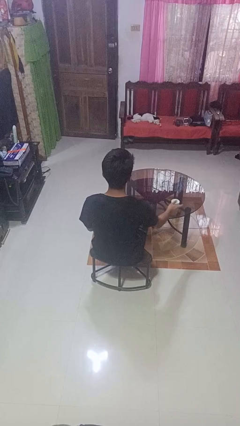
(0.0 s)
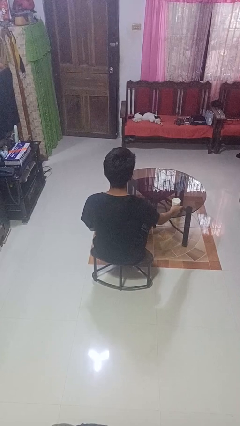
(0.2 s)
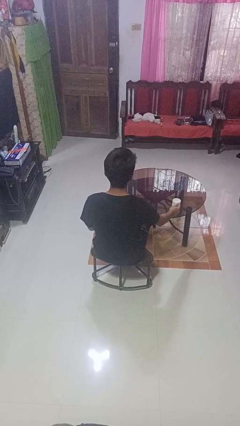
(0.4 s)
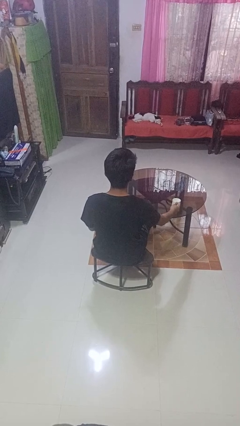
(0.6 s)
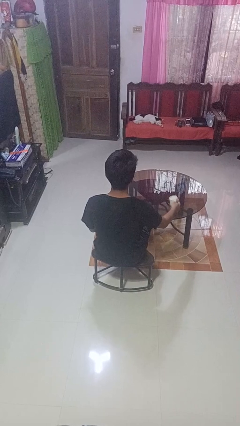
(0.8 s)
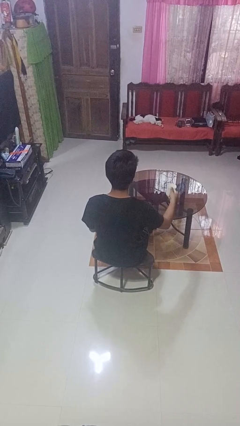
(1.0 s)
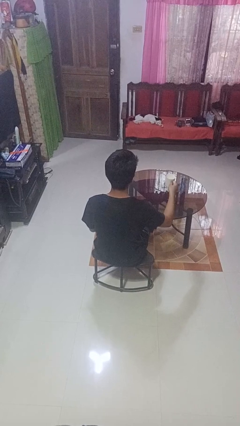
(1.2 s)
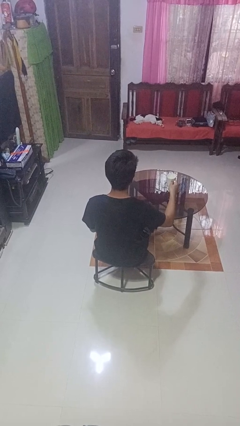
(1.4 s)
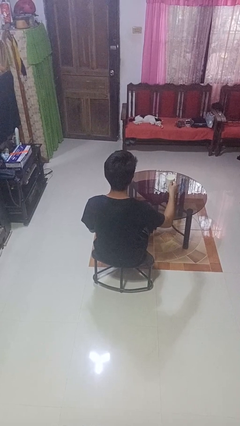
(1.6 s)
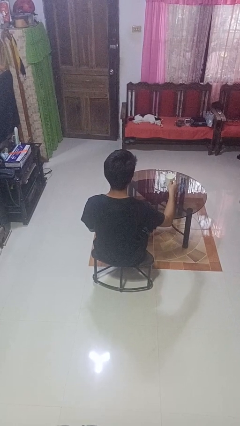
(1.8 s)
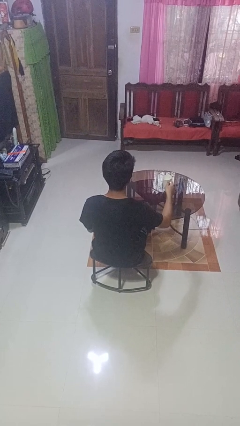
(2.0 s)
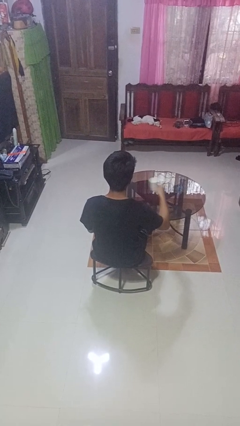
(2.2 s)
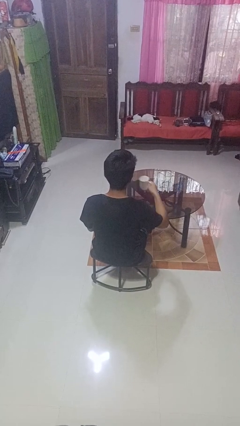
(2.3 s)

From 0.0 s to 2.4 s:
person picks up object from table

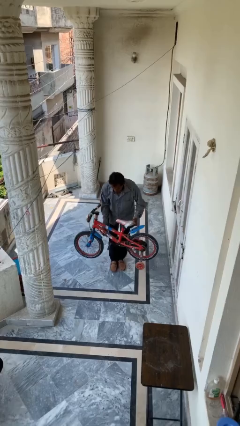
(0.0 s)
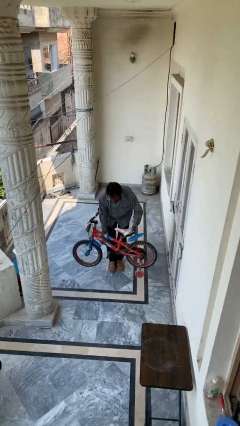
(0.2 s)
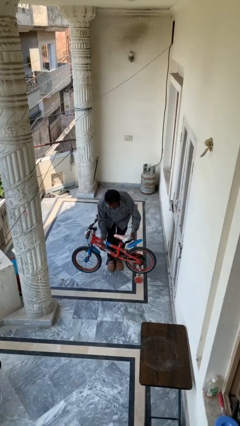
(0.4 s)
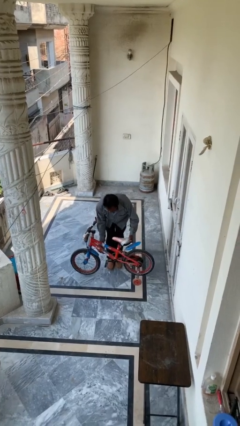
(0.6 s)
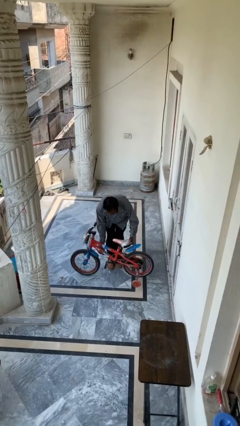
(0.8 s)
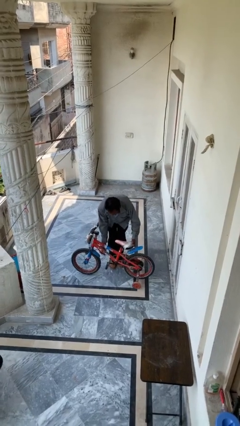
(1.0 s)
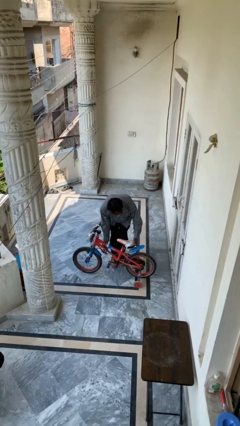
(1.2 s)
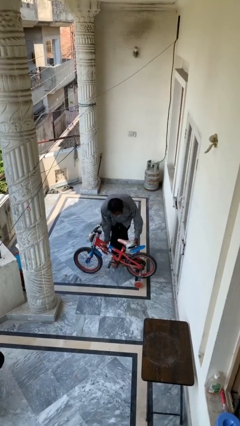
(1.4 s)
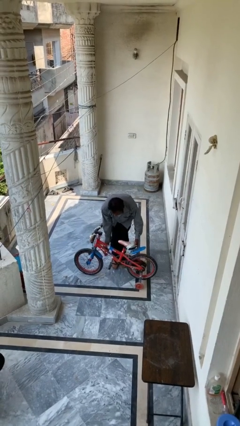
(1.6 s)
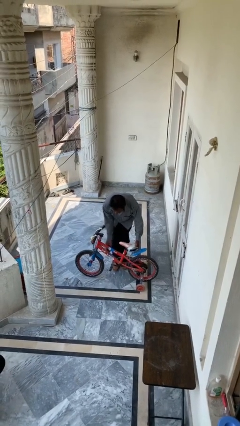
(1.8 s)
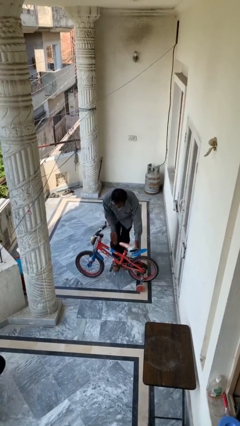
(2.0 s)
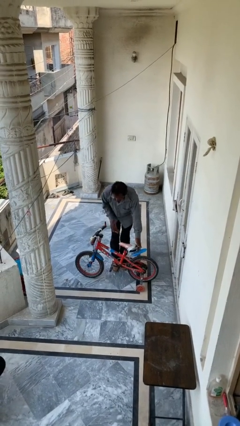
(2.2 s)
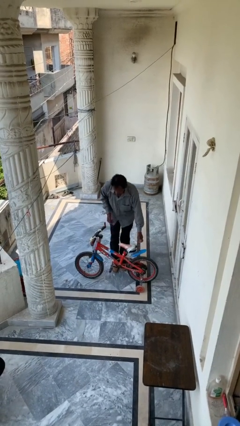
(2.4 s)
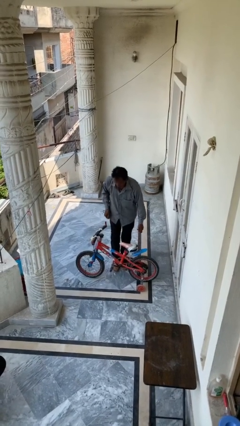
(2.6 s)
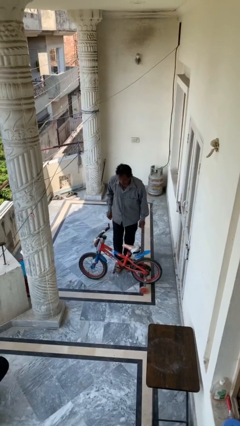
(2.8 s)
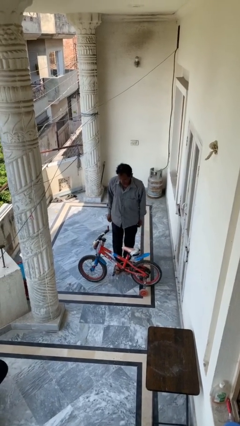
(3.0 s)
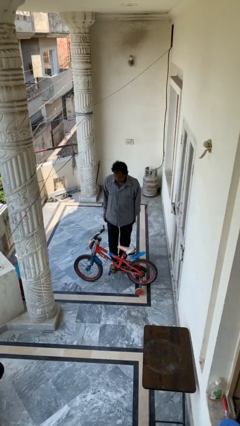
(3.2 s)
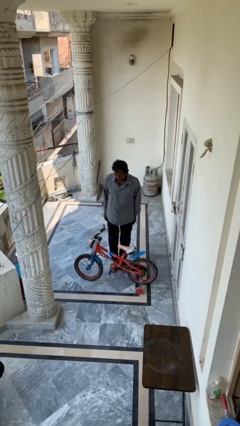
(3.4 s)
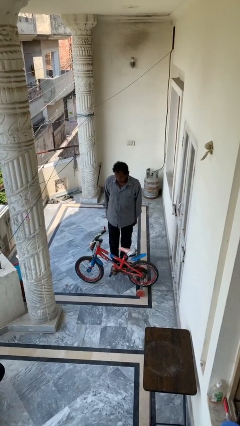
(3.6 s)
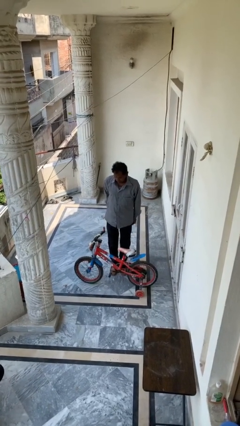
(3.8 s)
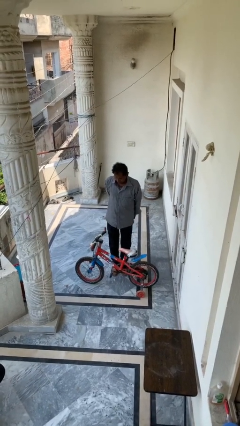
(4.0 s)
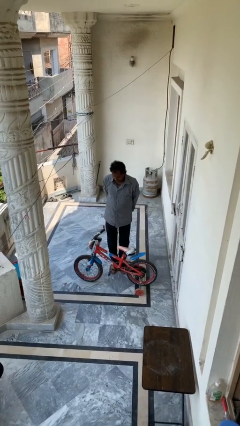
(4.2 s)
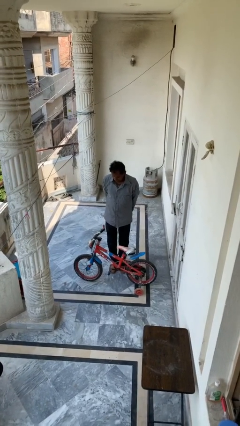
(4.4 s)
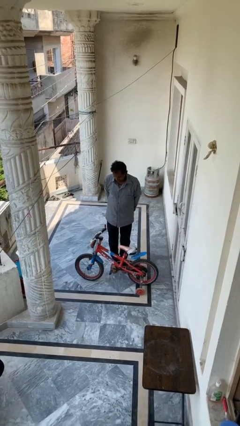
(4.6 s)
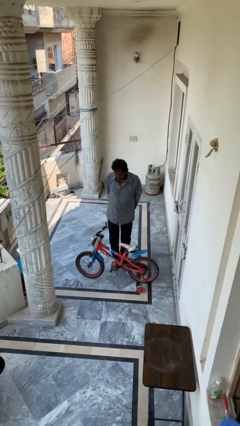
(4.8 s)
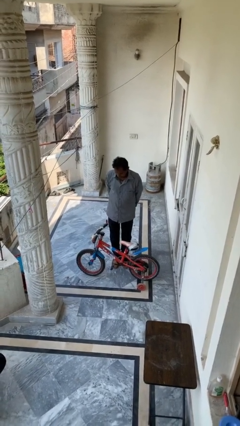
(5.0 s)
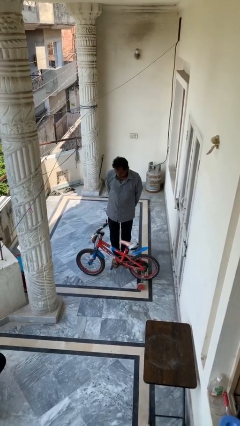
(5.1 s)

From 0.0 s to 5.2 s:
person puts down object on floor

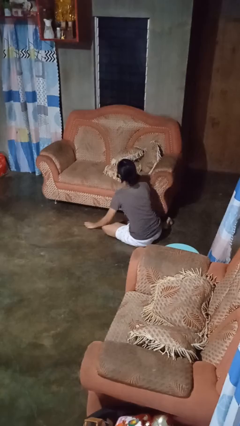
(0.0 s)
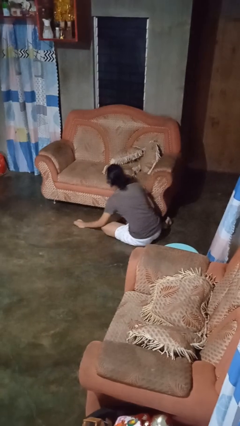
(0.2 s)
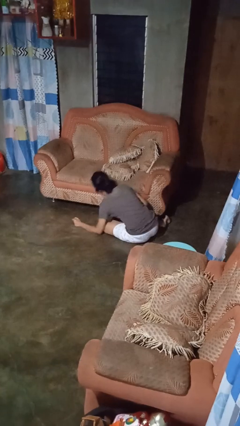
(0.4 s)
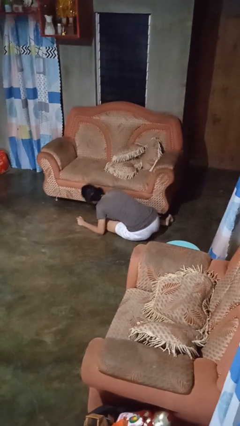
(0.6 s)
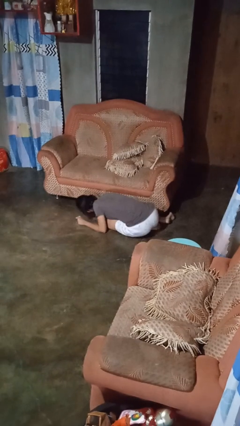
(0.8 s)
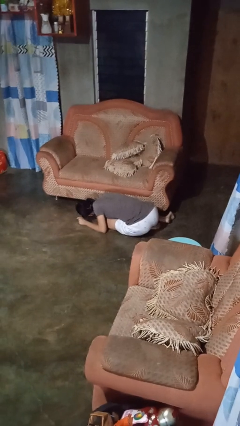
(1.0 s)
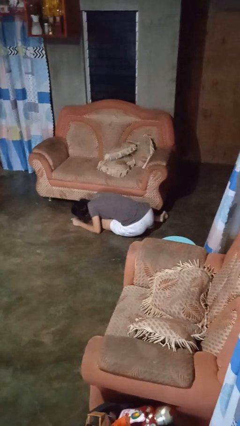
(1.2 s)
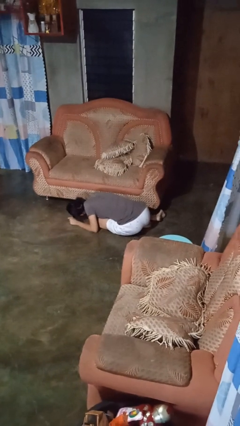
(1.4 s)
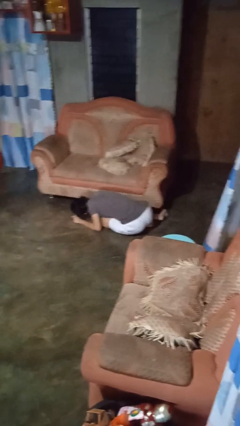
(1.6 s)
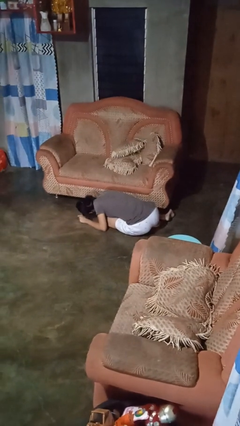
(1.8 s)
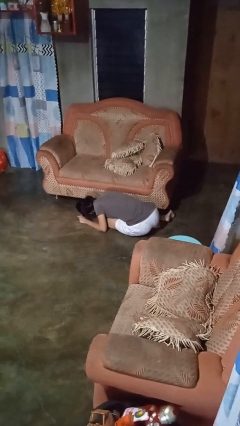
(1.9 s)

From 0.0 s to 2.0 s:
person searches under couch

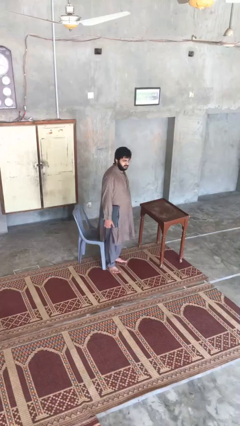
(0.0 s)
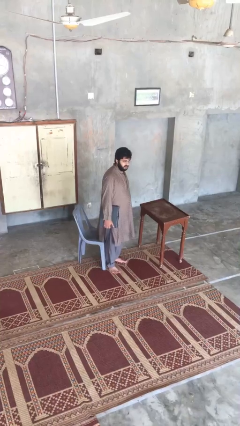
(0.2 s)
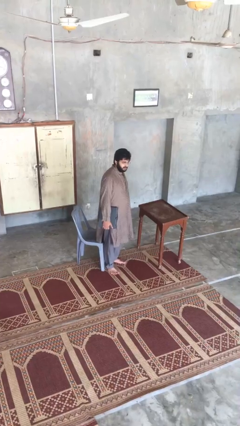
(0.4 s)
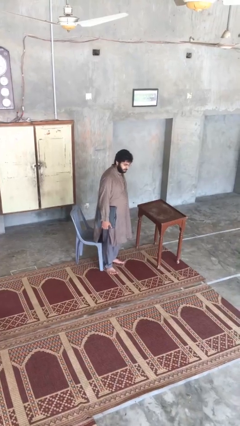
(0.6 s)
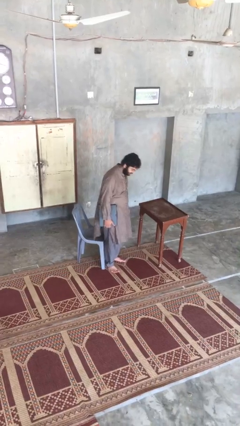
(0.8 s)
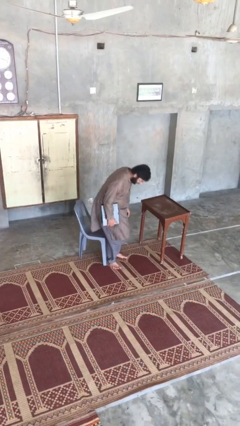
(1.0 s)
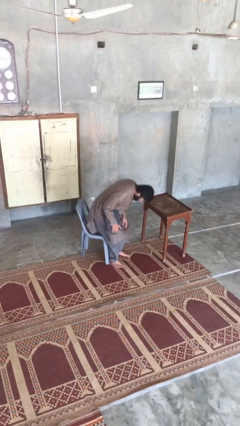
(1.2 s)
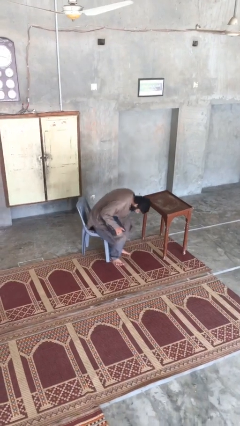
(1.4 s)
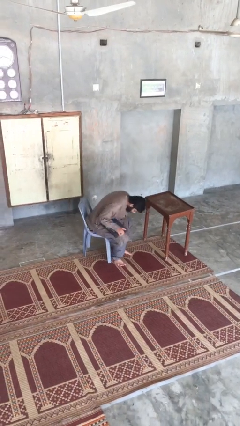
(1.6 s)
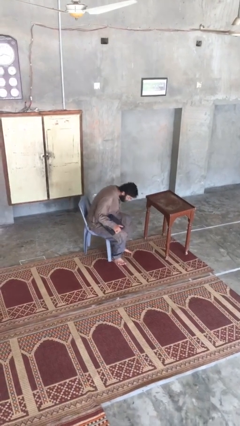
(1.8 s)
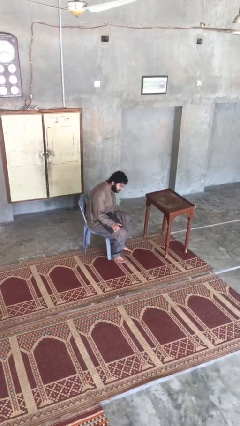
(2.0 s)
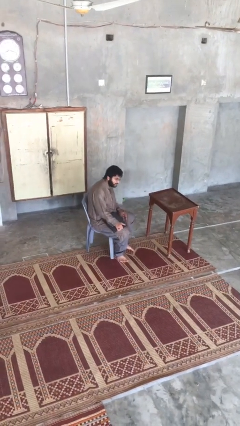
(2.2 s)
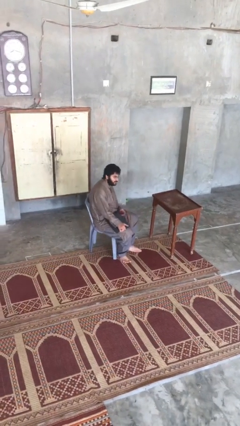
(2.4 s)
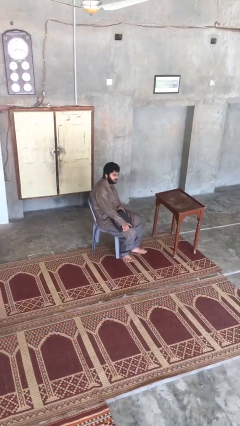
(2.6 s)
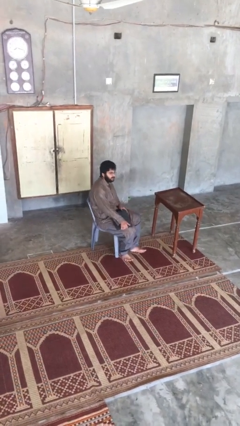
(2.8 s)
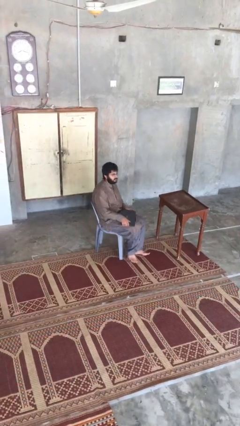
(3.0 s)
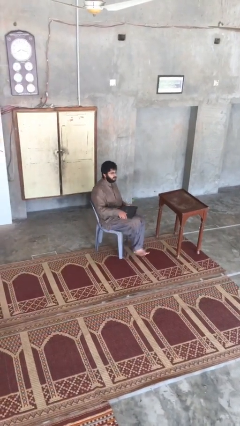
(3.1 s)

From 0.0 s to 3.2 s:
person sits down

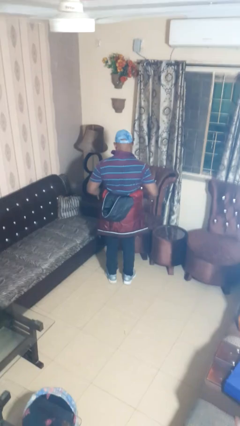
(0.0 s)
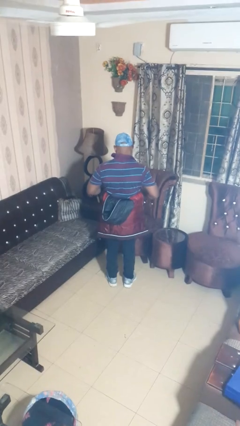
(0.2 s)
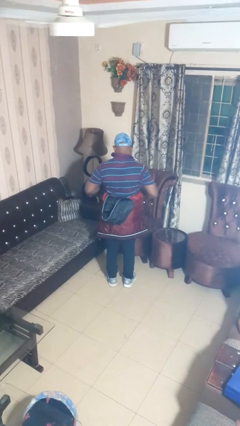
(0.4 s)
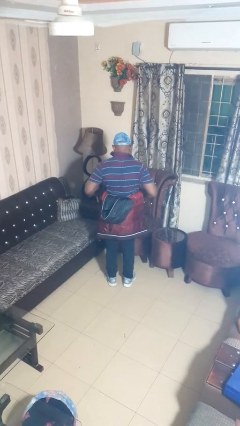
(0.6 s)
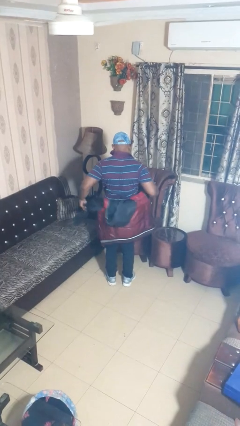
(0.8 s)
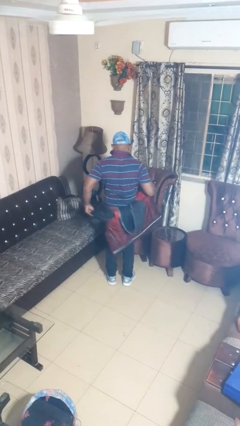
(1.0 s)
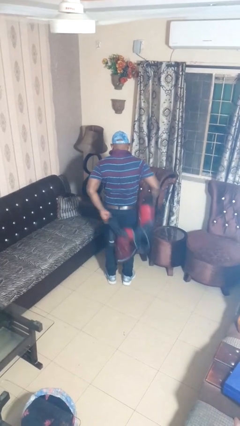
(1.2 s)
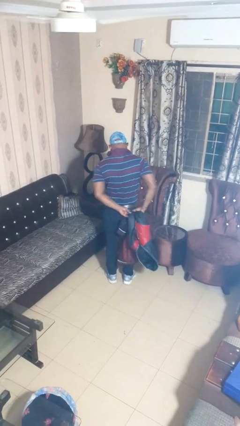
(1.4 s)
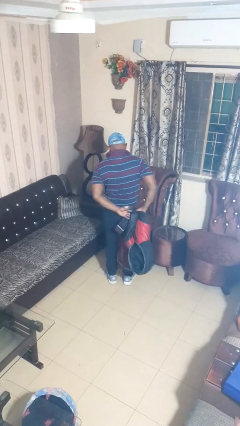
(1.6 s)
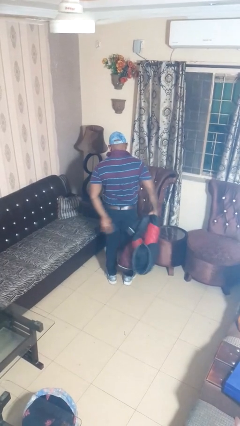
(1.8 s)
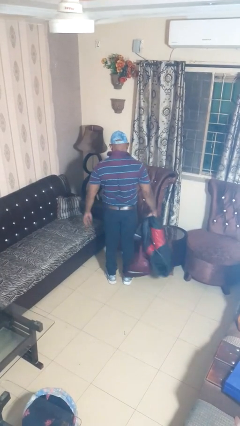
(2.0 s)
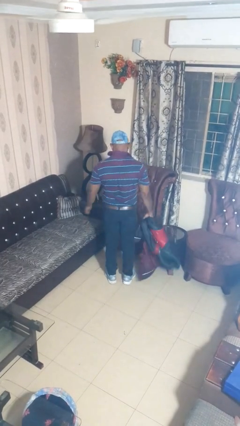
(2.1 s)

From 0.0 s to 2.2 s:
person unties jacket around waist

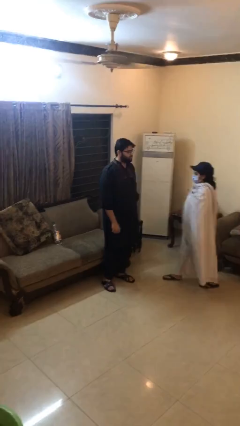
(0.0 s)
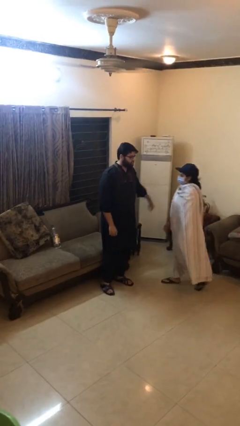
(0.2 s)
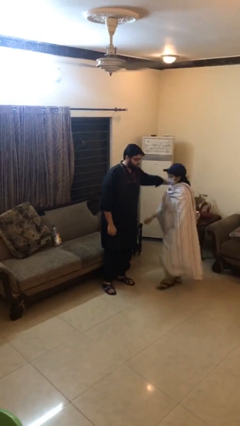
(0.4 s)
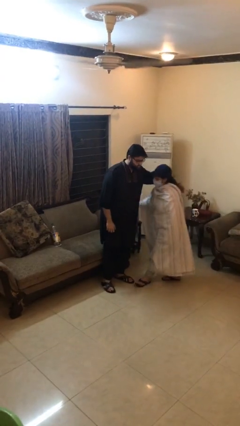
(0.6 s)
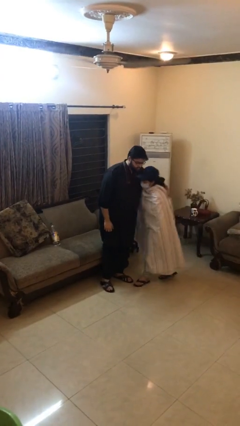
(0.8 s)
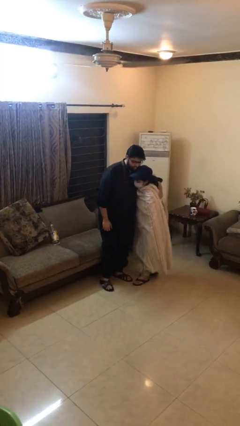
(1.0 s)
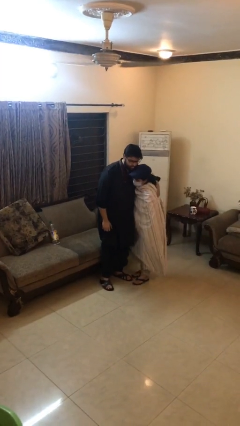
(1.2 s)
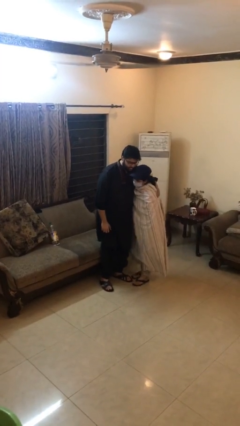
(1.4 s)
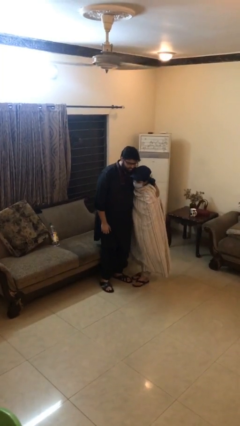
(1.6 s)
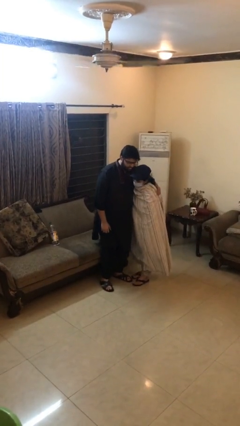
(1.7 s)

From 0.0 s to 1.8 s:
person embraces person

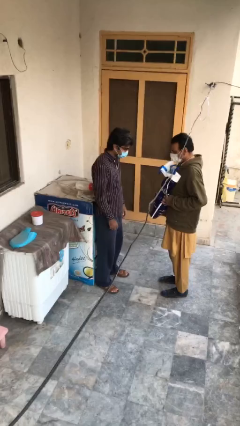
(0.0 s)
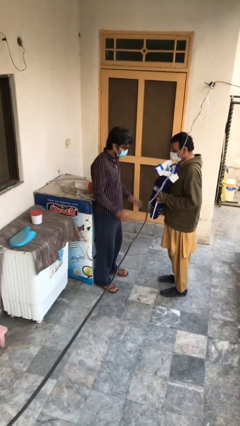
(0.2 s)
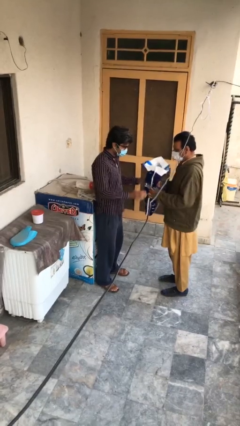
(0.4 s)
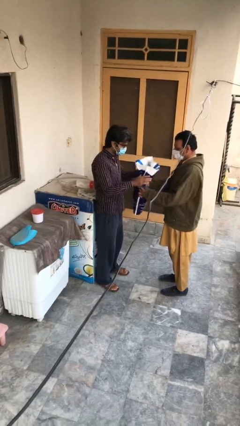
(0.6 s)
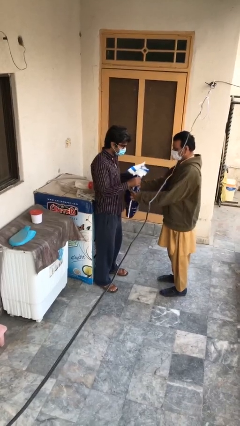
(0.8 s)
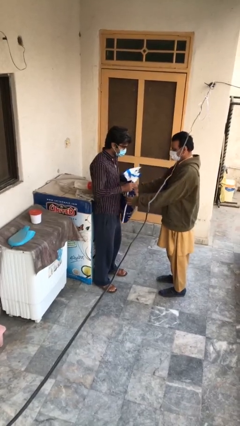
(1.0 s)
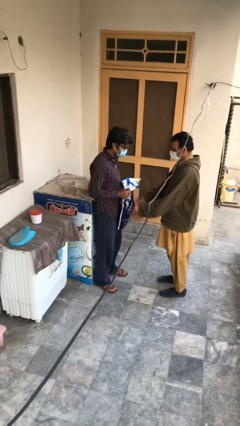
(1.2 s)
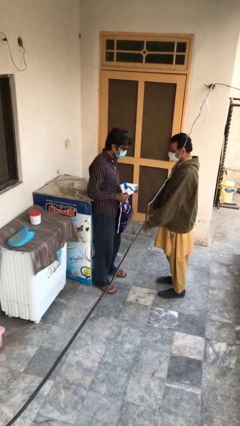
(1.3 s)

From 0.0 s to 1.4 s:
person transfers object to person
